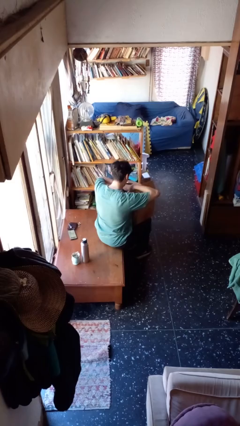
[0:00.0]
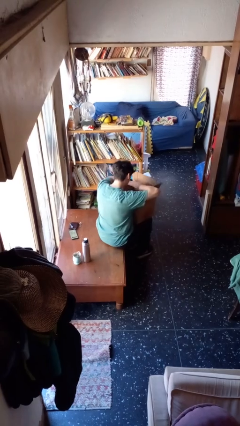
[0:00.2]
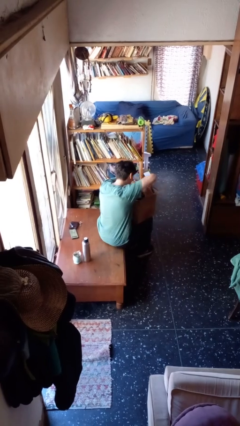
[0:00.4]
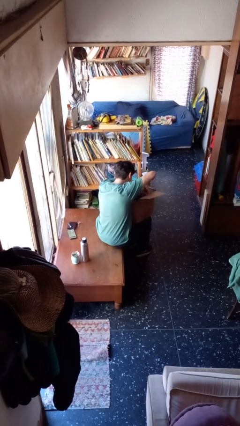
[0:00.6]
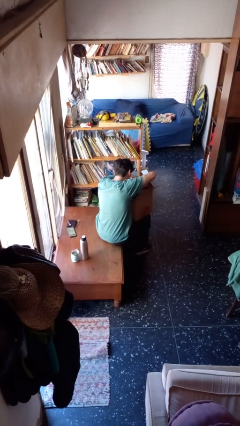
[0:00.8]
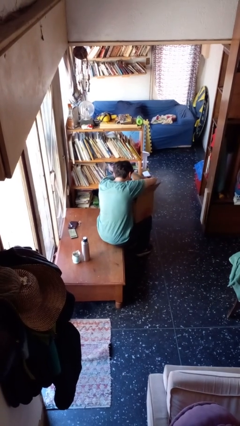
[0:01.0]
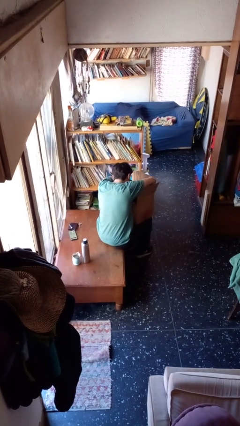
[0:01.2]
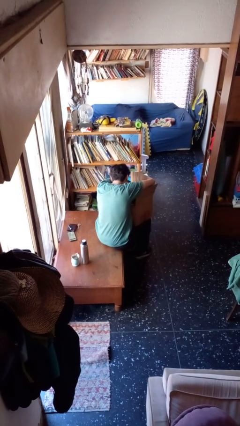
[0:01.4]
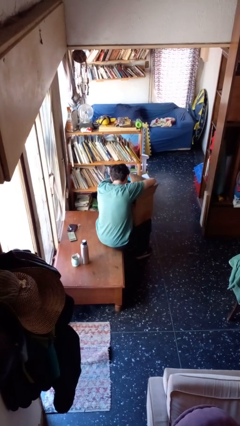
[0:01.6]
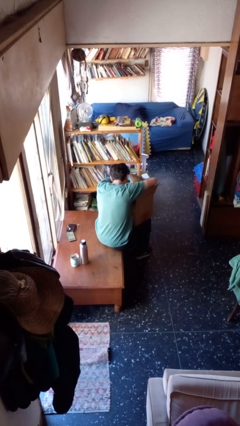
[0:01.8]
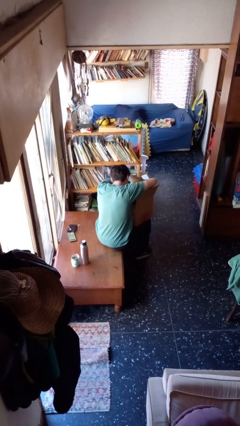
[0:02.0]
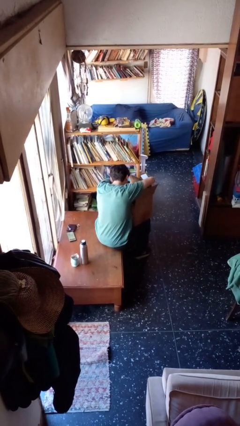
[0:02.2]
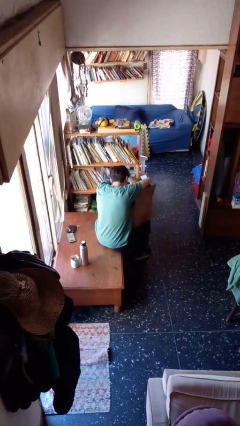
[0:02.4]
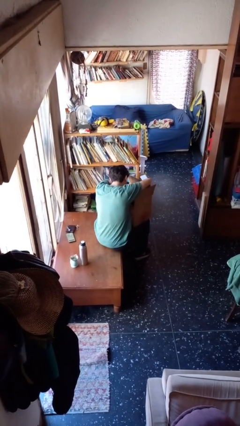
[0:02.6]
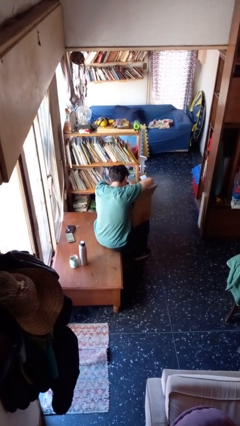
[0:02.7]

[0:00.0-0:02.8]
person searches in box

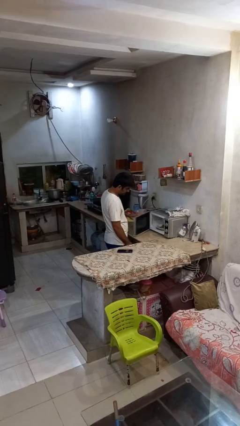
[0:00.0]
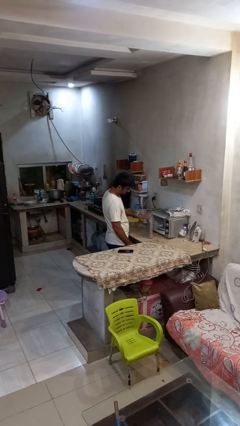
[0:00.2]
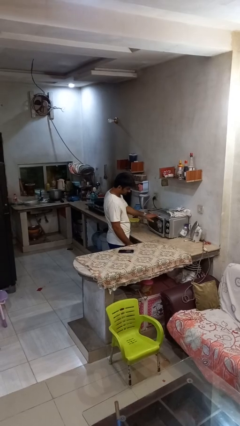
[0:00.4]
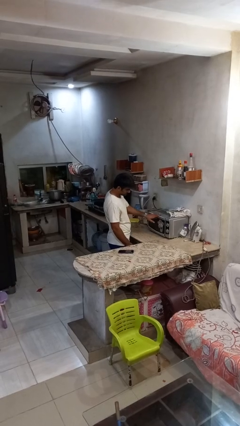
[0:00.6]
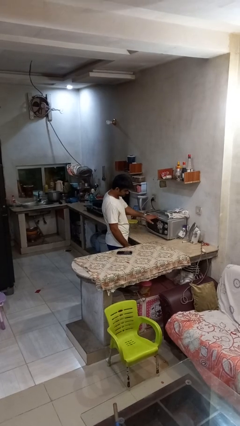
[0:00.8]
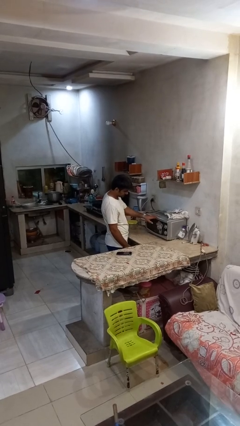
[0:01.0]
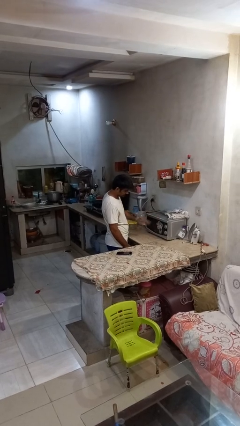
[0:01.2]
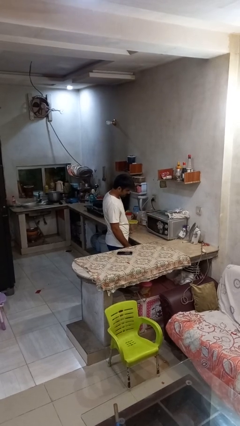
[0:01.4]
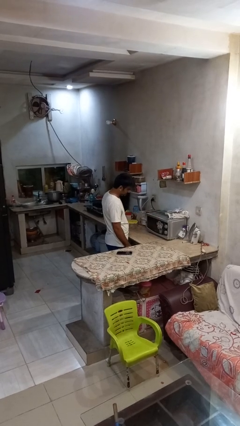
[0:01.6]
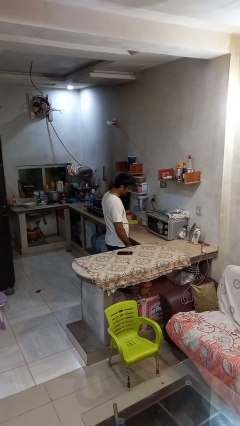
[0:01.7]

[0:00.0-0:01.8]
person closes microwave

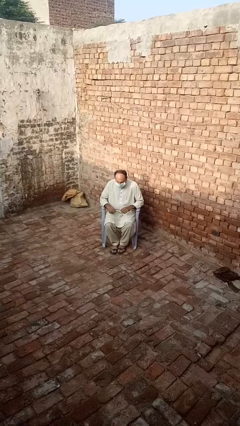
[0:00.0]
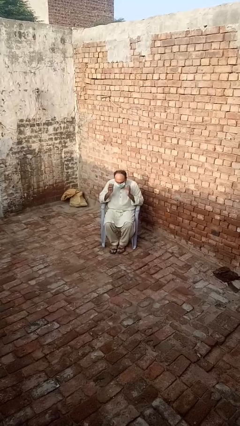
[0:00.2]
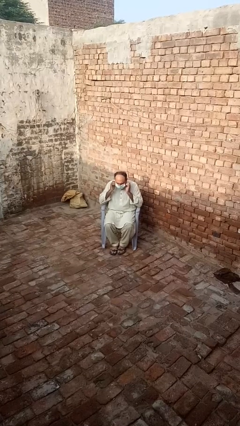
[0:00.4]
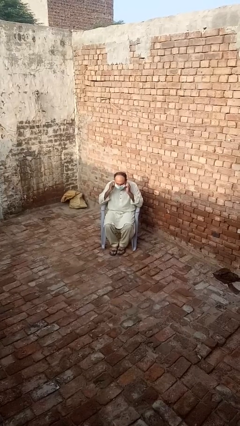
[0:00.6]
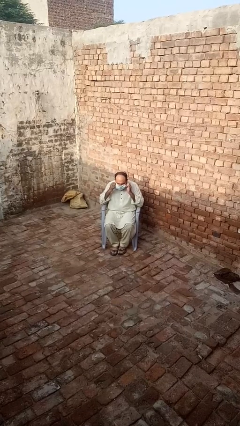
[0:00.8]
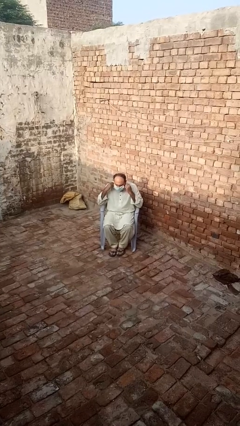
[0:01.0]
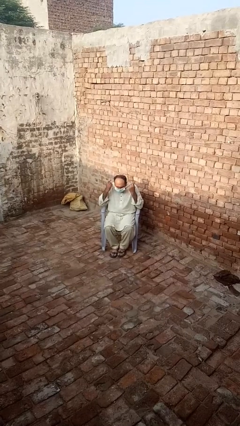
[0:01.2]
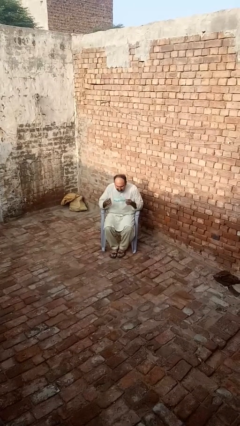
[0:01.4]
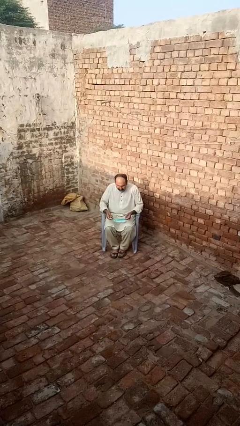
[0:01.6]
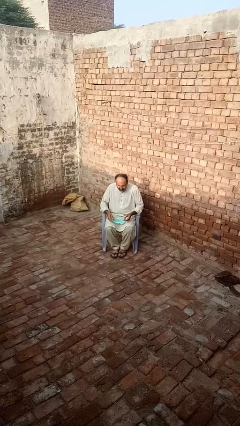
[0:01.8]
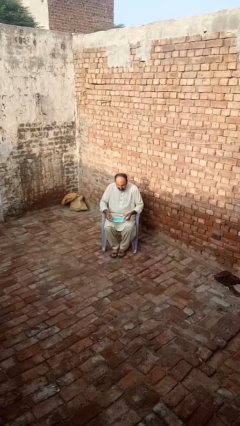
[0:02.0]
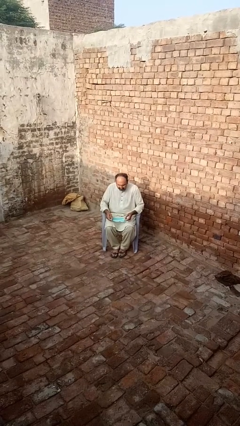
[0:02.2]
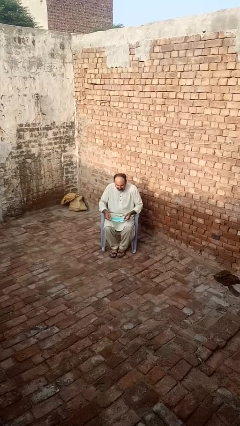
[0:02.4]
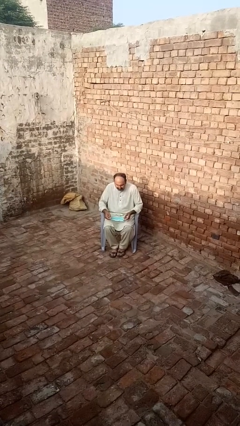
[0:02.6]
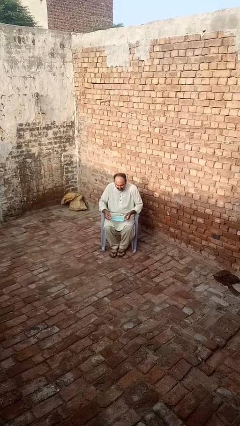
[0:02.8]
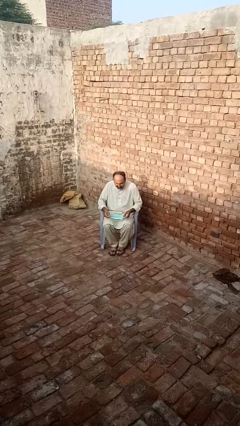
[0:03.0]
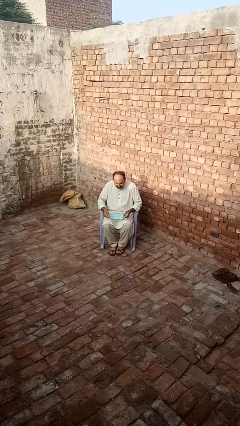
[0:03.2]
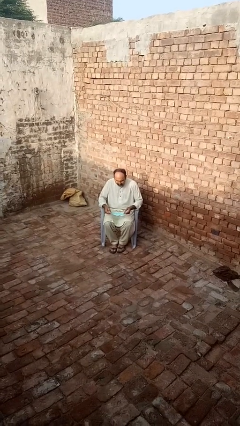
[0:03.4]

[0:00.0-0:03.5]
person takes off facemask

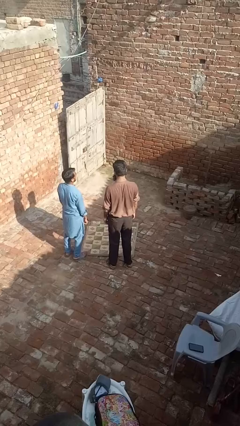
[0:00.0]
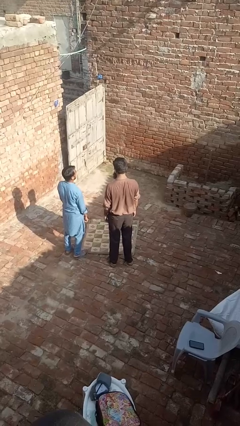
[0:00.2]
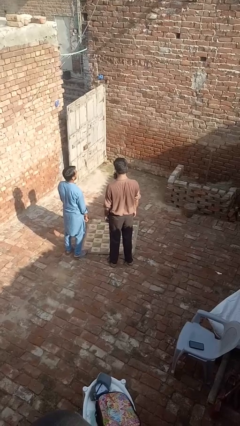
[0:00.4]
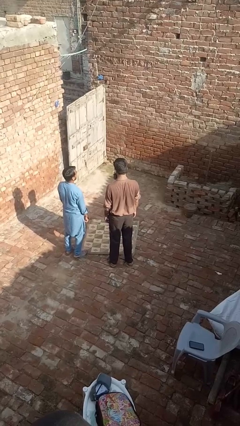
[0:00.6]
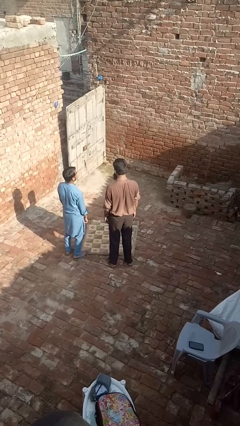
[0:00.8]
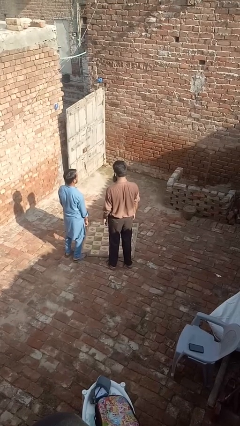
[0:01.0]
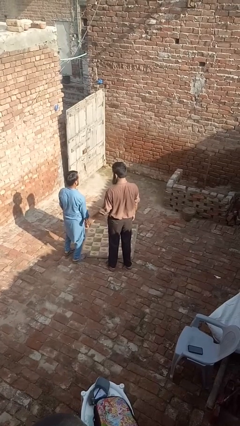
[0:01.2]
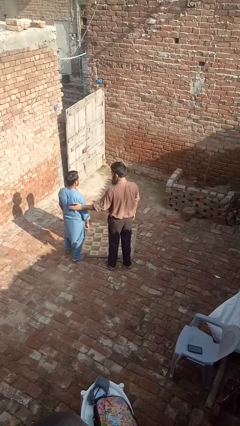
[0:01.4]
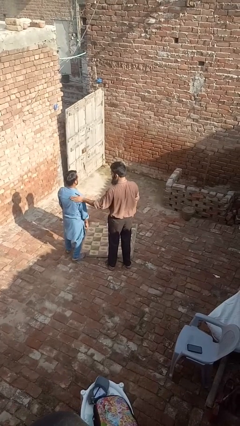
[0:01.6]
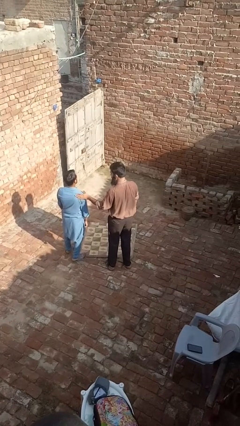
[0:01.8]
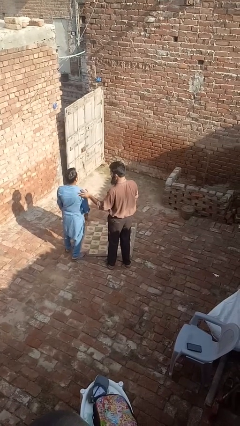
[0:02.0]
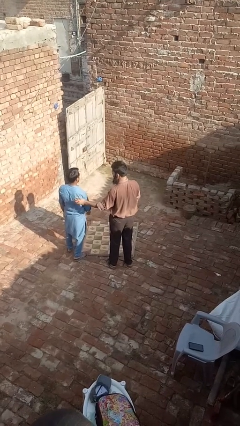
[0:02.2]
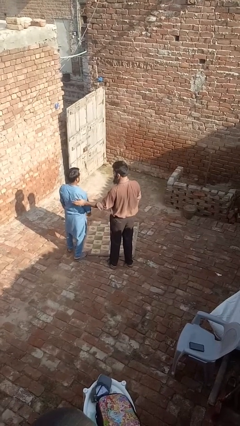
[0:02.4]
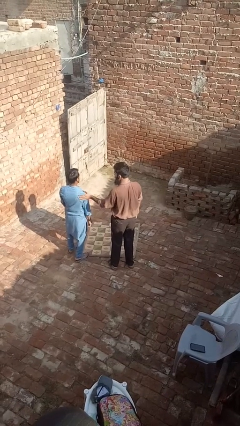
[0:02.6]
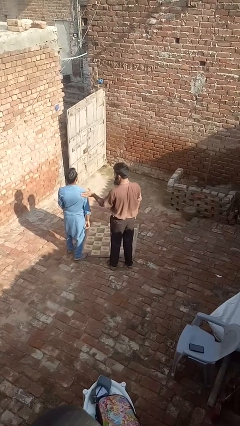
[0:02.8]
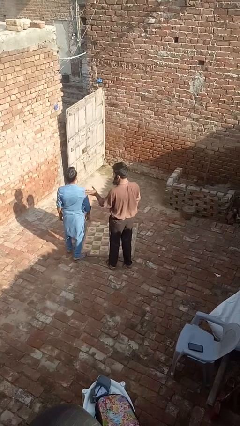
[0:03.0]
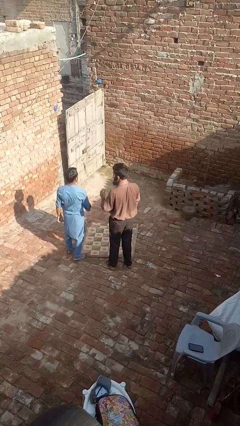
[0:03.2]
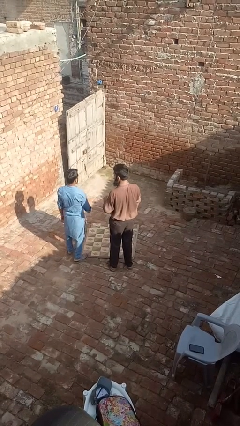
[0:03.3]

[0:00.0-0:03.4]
person shoves person

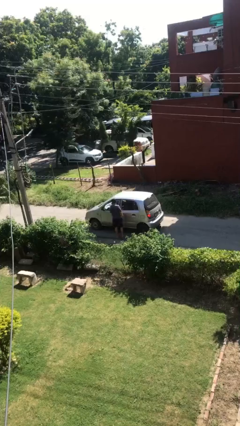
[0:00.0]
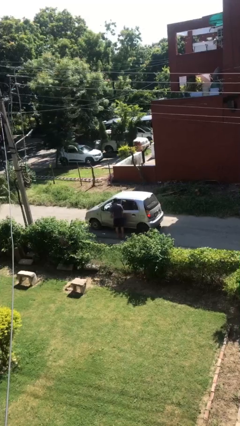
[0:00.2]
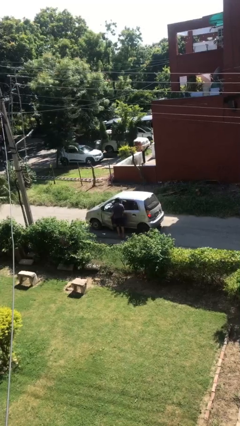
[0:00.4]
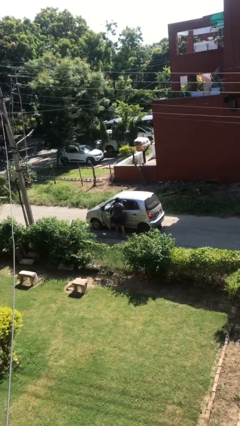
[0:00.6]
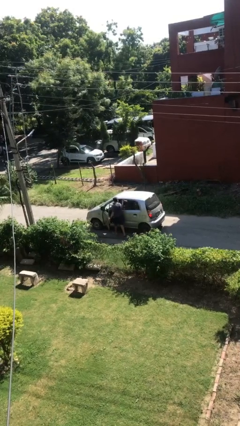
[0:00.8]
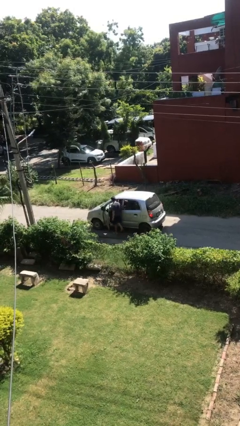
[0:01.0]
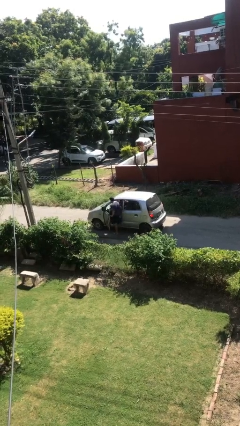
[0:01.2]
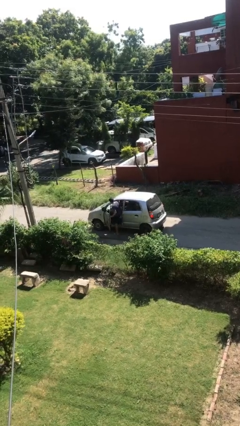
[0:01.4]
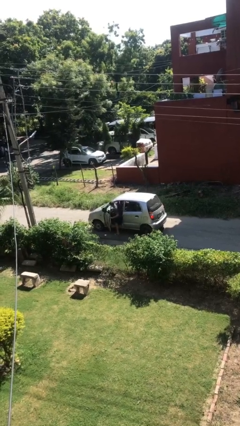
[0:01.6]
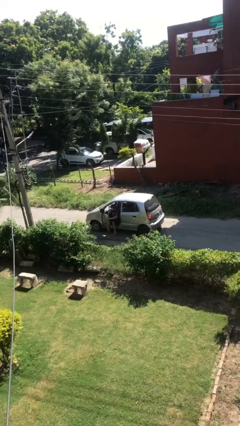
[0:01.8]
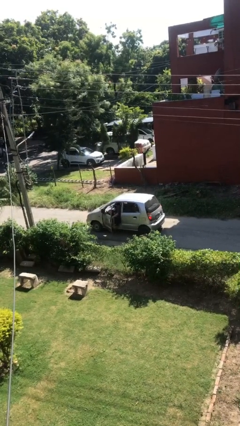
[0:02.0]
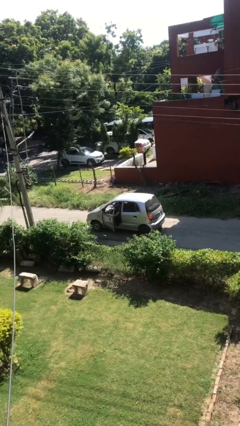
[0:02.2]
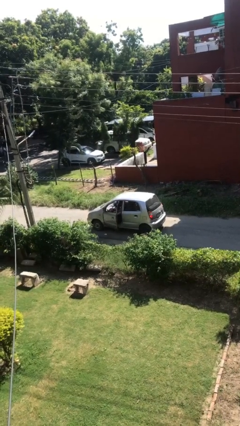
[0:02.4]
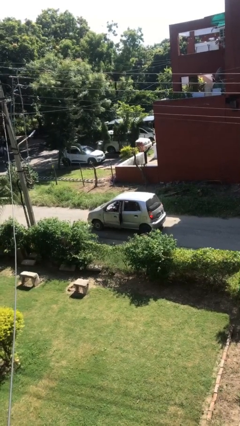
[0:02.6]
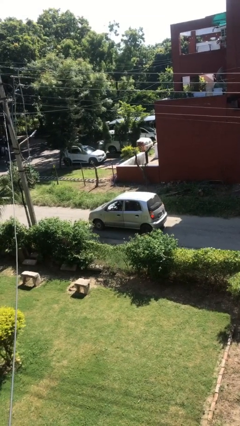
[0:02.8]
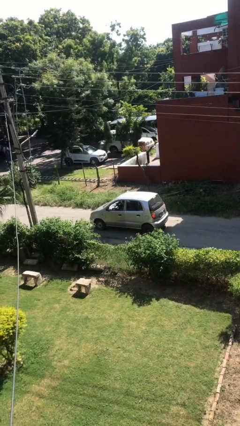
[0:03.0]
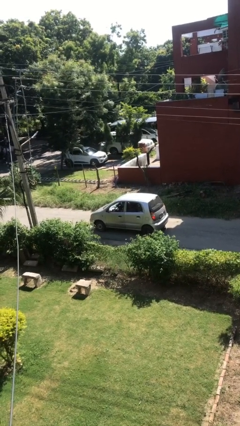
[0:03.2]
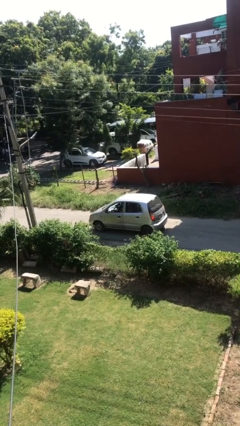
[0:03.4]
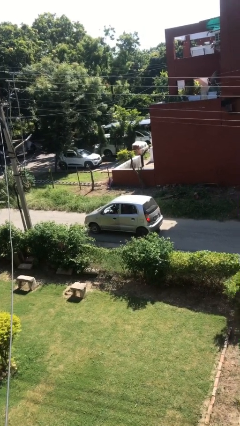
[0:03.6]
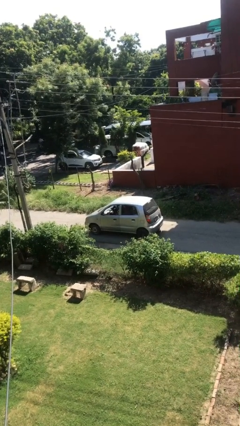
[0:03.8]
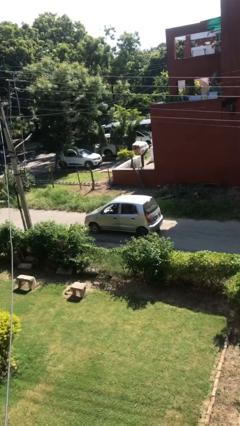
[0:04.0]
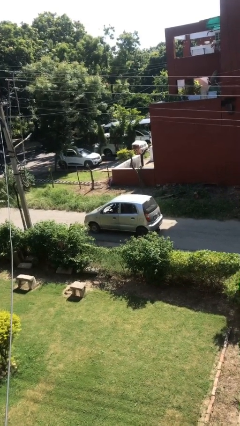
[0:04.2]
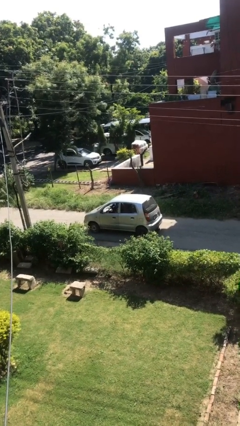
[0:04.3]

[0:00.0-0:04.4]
car picks up person

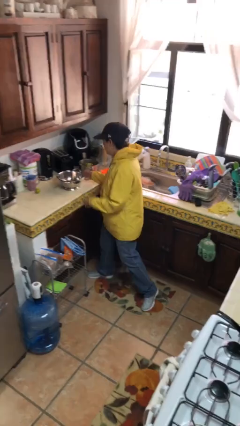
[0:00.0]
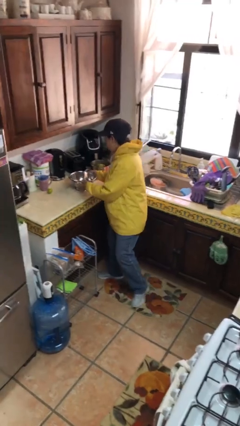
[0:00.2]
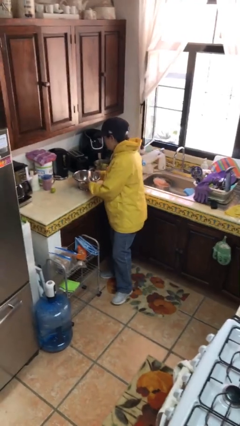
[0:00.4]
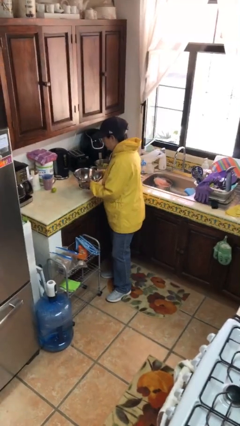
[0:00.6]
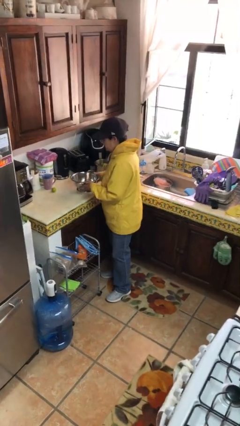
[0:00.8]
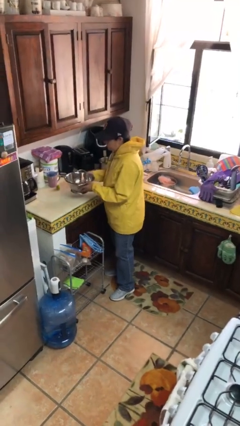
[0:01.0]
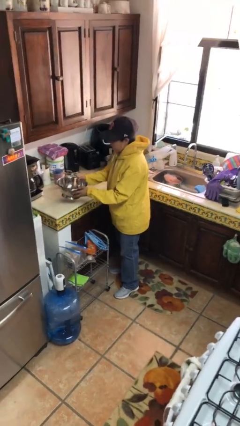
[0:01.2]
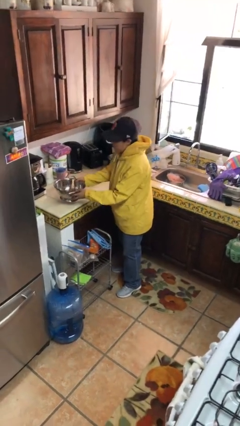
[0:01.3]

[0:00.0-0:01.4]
person picks up object from countertop

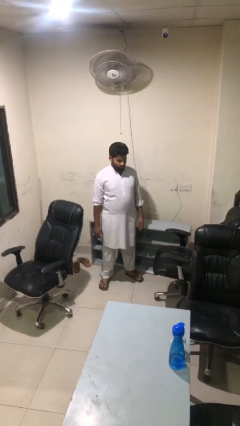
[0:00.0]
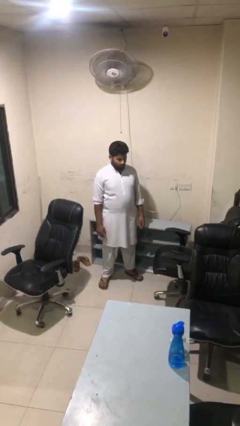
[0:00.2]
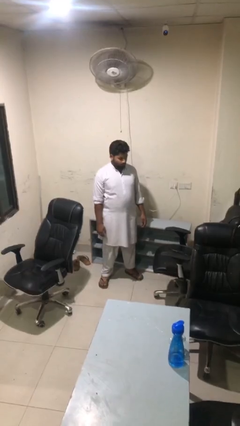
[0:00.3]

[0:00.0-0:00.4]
person unplugs from electrical socket
